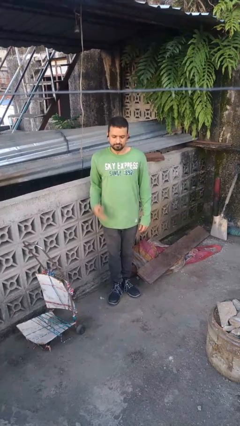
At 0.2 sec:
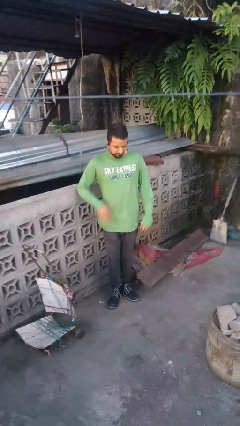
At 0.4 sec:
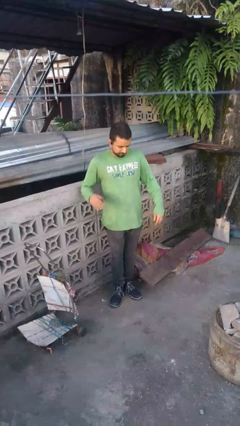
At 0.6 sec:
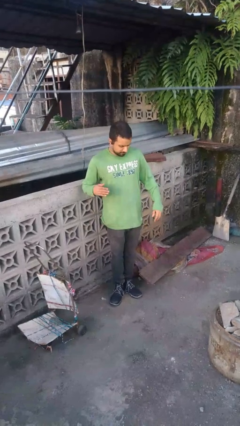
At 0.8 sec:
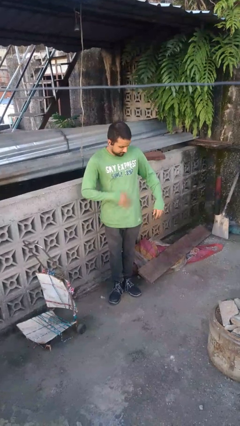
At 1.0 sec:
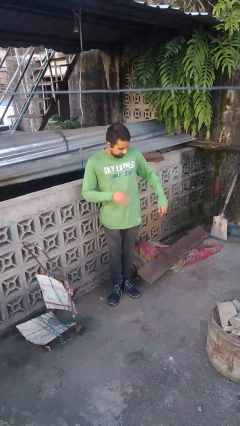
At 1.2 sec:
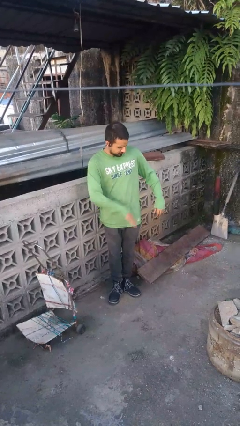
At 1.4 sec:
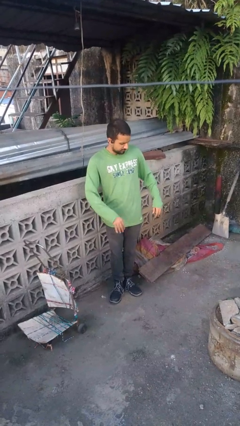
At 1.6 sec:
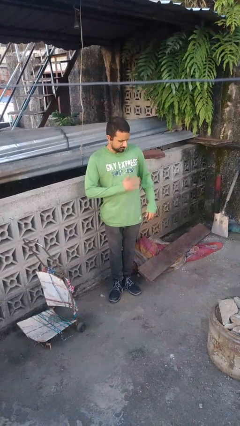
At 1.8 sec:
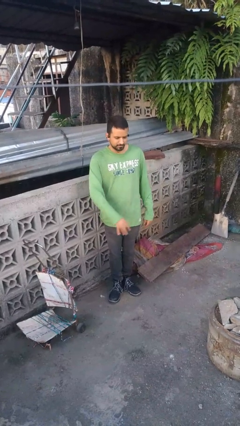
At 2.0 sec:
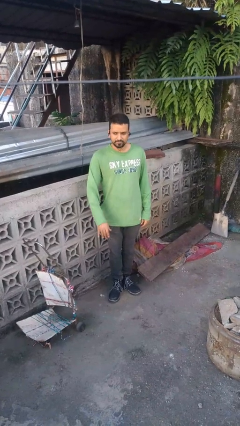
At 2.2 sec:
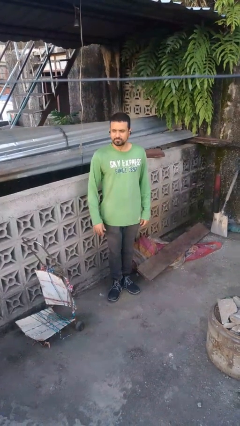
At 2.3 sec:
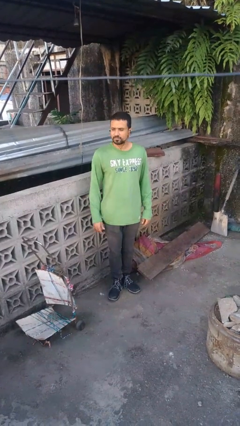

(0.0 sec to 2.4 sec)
person swats bug

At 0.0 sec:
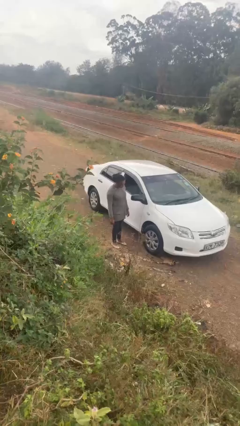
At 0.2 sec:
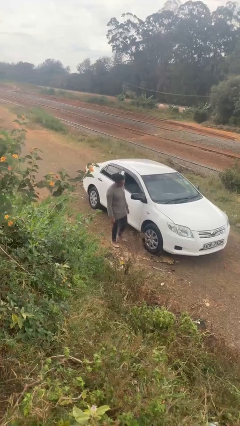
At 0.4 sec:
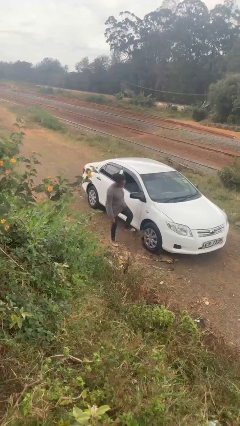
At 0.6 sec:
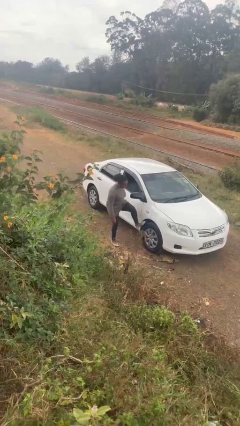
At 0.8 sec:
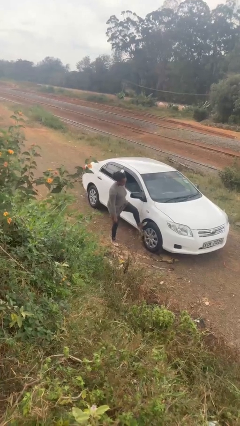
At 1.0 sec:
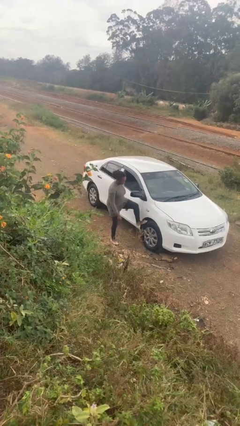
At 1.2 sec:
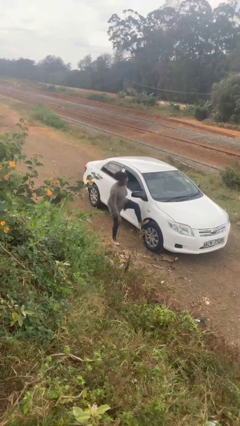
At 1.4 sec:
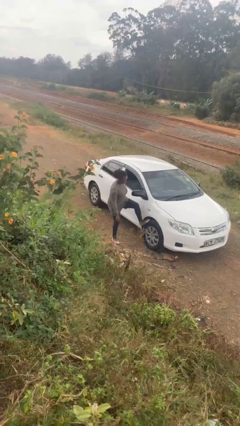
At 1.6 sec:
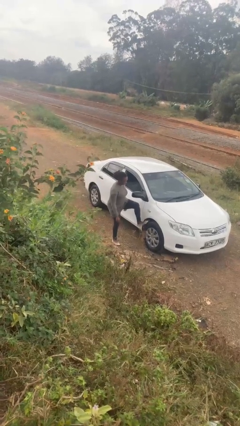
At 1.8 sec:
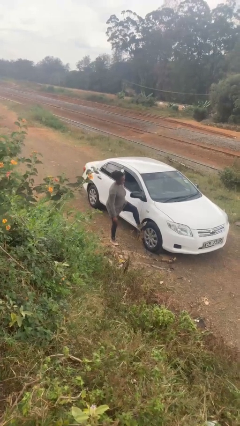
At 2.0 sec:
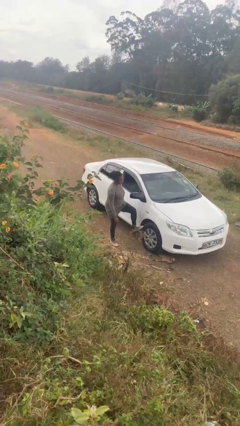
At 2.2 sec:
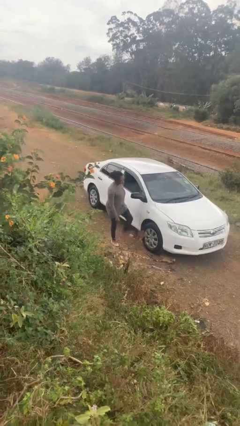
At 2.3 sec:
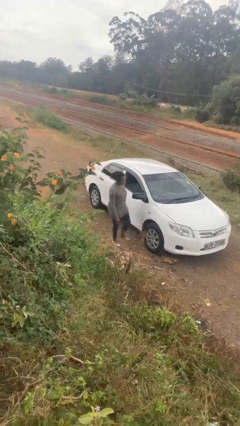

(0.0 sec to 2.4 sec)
person kicks car tires

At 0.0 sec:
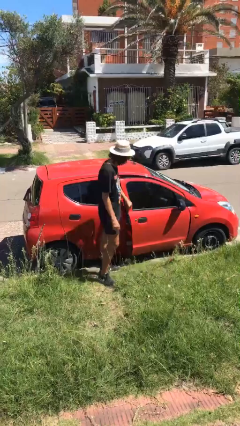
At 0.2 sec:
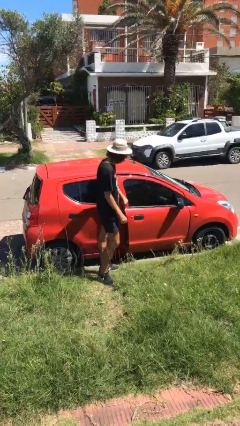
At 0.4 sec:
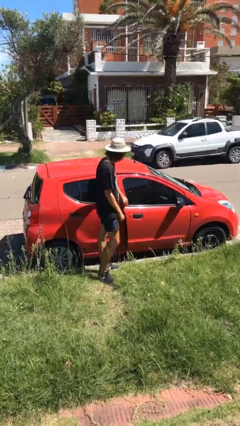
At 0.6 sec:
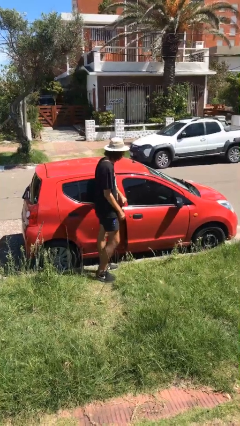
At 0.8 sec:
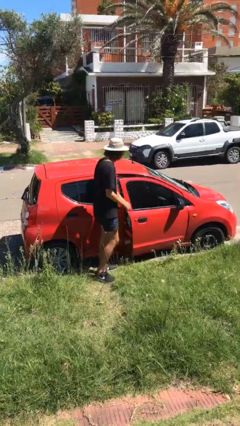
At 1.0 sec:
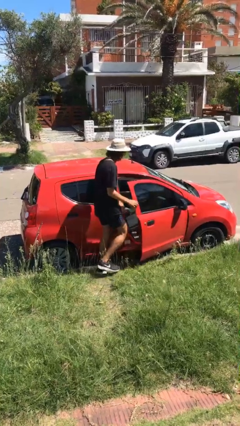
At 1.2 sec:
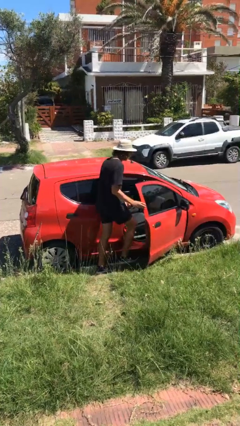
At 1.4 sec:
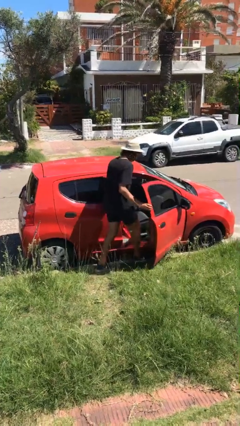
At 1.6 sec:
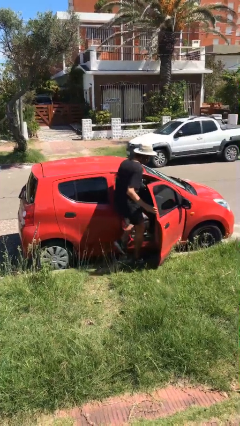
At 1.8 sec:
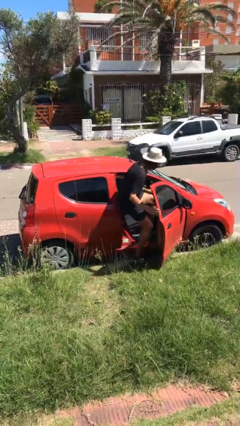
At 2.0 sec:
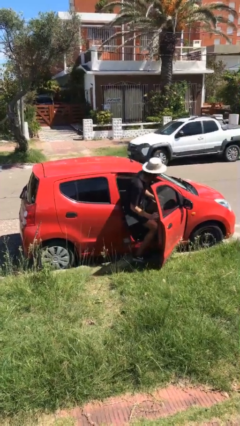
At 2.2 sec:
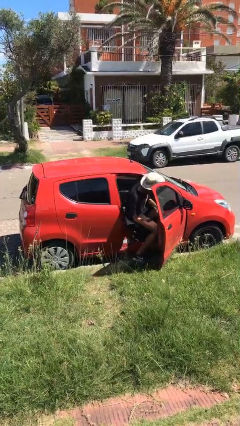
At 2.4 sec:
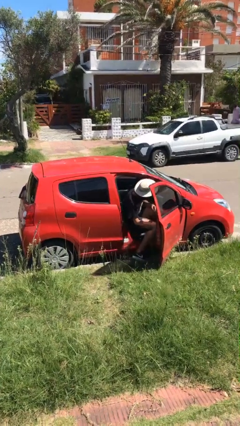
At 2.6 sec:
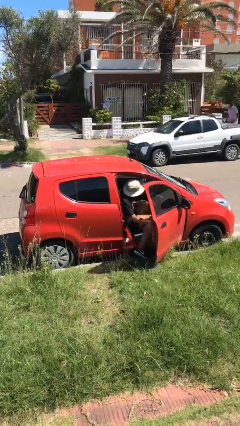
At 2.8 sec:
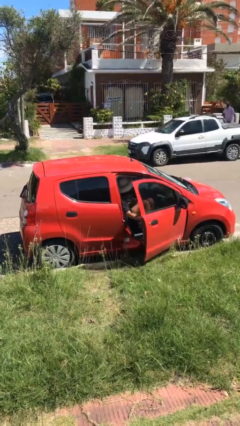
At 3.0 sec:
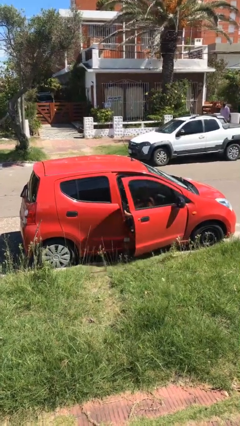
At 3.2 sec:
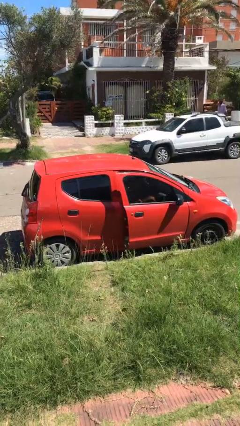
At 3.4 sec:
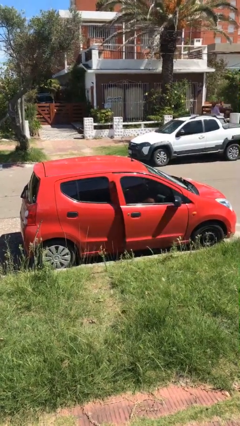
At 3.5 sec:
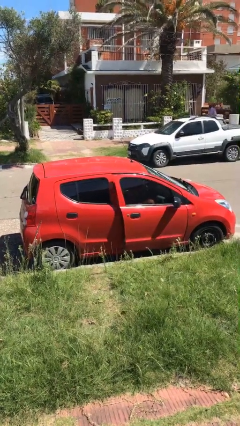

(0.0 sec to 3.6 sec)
car picks up person

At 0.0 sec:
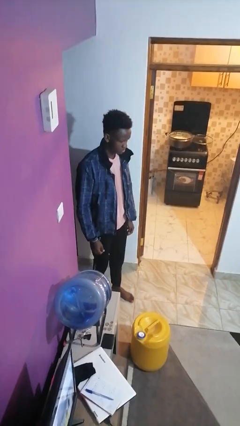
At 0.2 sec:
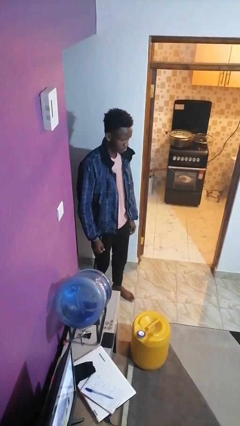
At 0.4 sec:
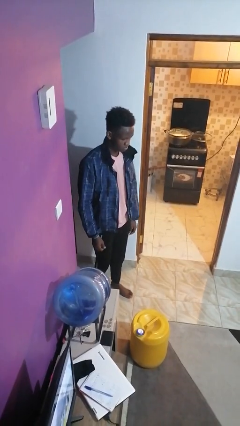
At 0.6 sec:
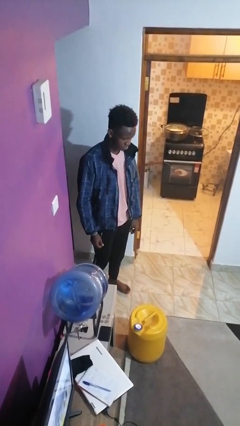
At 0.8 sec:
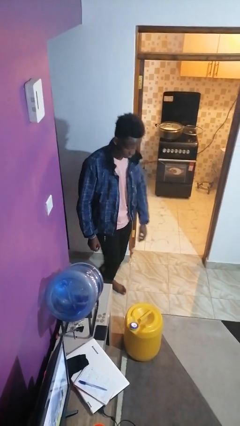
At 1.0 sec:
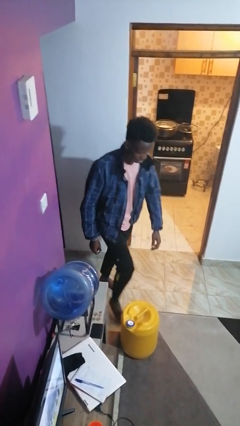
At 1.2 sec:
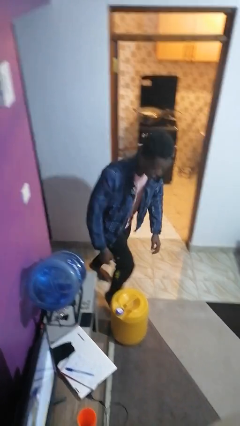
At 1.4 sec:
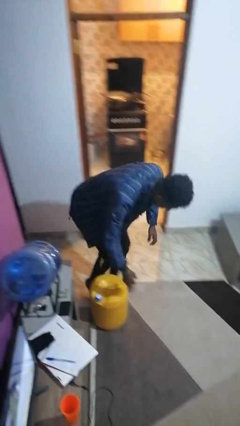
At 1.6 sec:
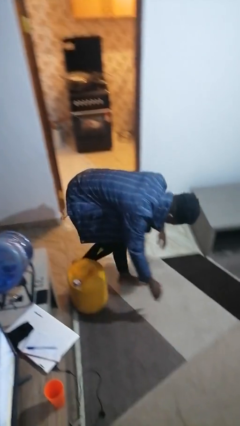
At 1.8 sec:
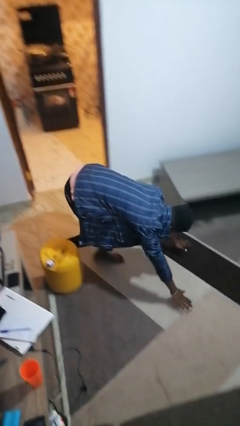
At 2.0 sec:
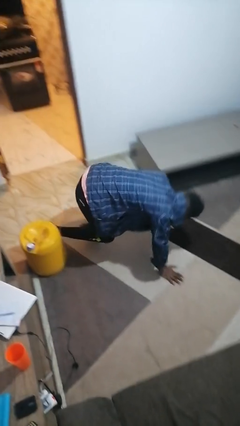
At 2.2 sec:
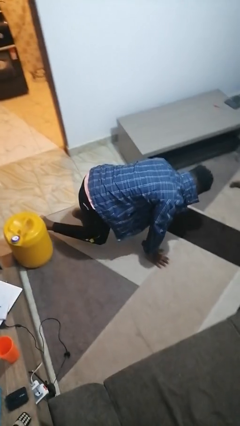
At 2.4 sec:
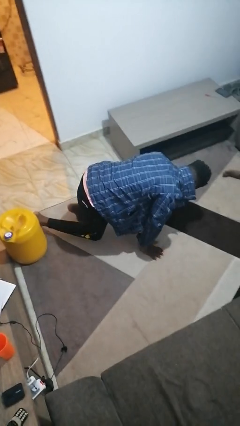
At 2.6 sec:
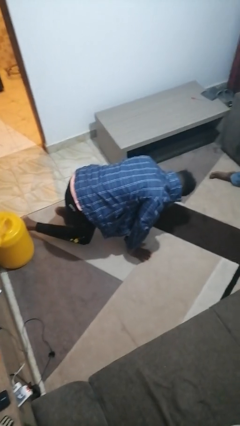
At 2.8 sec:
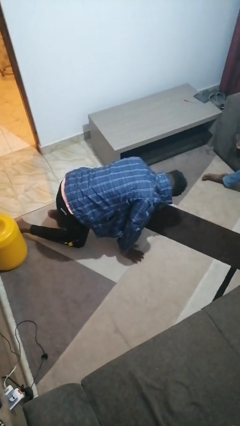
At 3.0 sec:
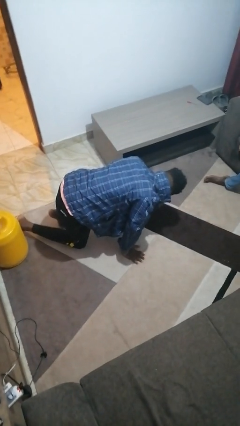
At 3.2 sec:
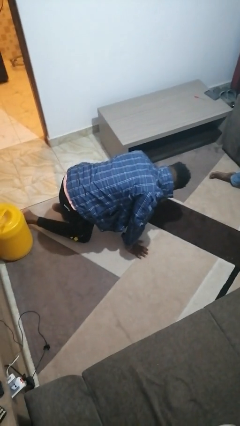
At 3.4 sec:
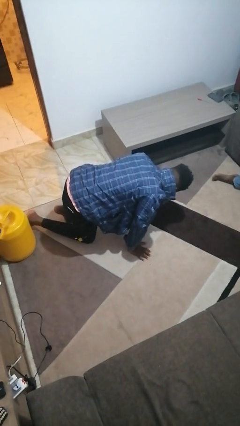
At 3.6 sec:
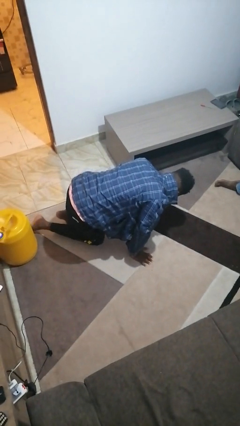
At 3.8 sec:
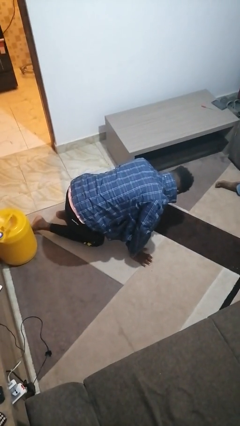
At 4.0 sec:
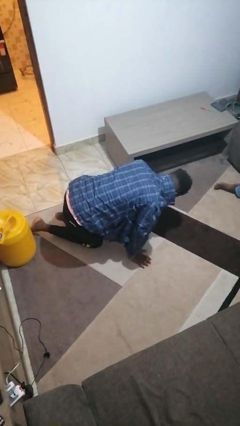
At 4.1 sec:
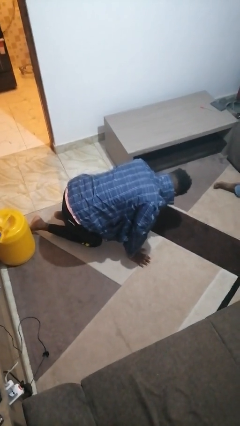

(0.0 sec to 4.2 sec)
person trips on object on floor

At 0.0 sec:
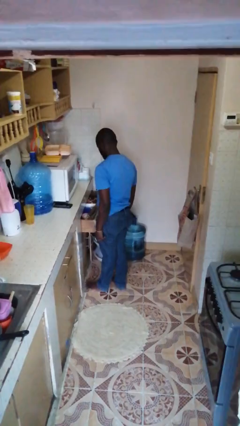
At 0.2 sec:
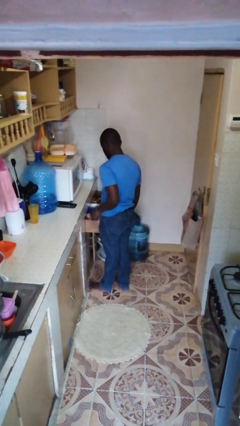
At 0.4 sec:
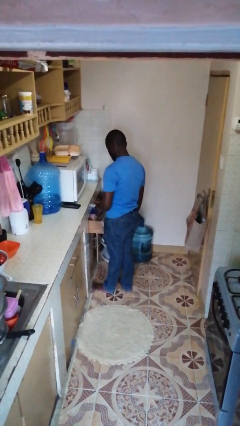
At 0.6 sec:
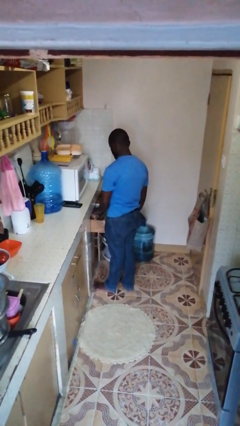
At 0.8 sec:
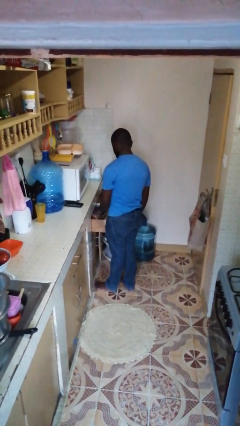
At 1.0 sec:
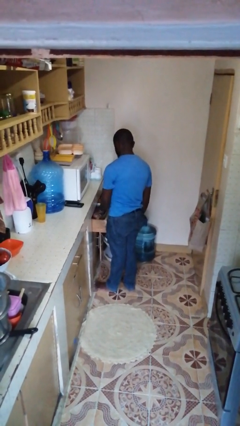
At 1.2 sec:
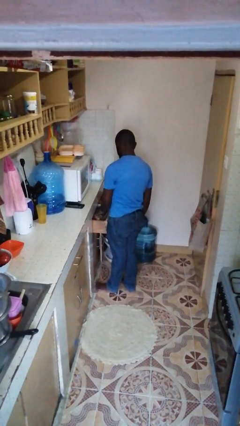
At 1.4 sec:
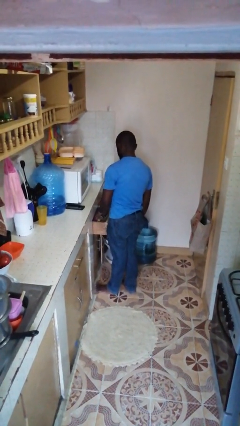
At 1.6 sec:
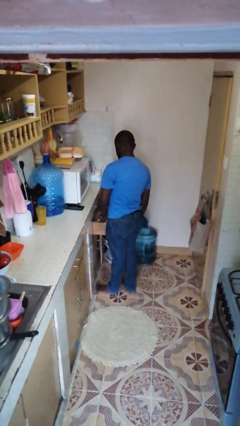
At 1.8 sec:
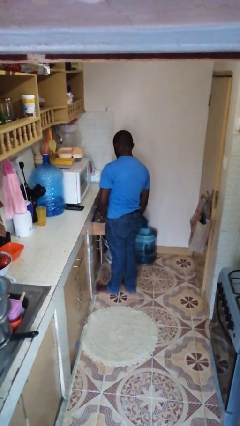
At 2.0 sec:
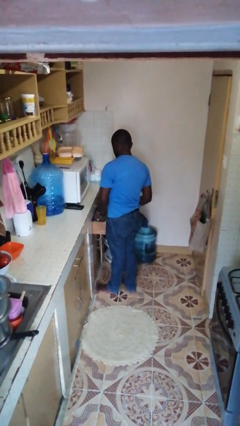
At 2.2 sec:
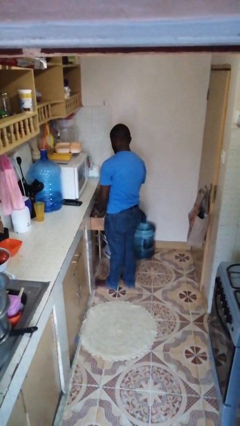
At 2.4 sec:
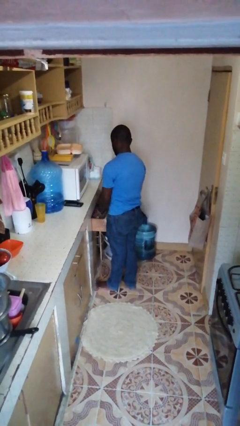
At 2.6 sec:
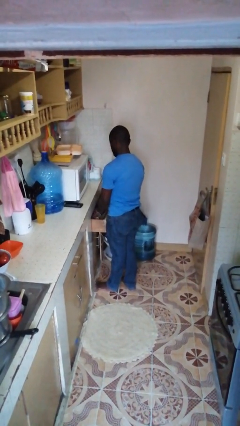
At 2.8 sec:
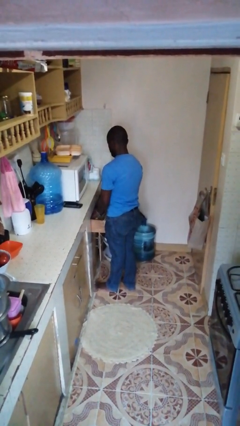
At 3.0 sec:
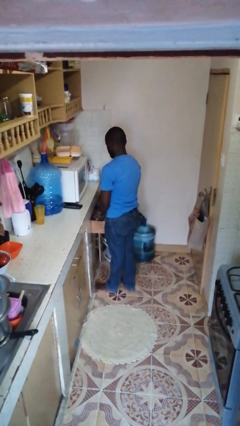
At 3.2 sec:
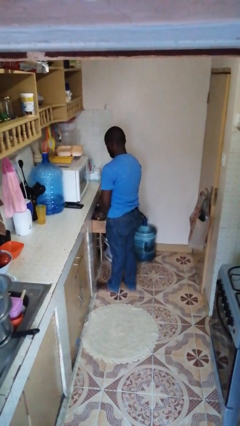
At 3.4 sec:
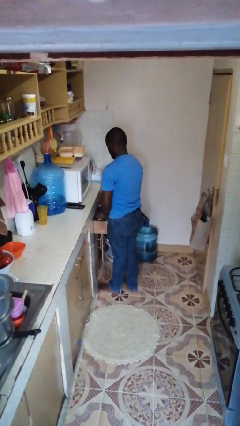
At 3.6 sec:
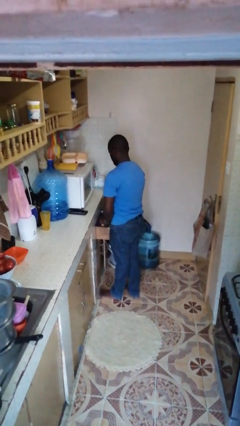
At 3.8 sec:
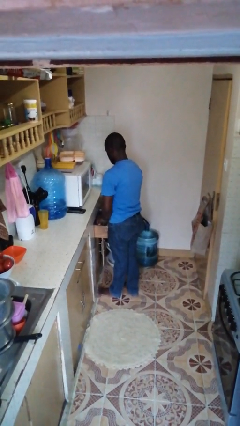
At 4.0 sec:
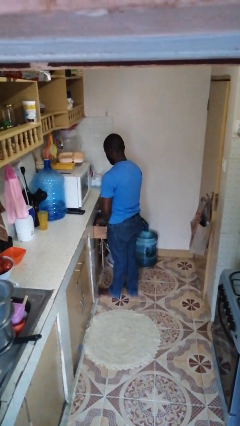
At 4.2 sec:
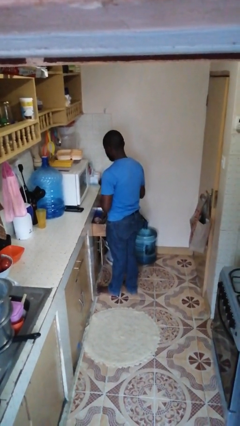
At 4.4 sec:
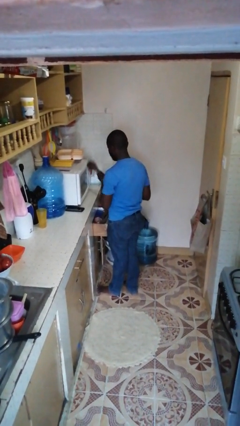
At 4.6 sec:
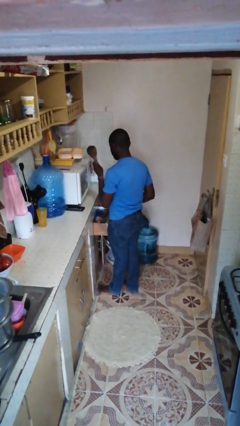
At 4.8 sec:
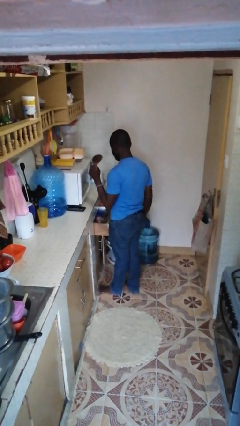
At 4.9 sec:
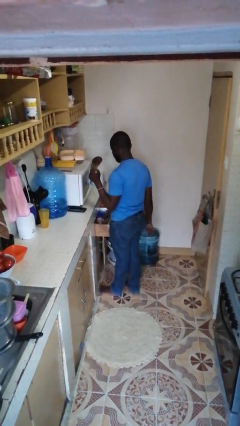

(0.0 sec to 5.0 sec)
person takes object from kitchen drawer
